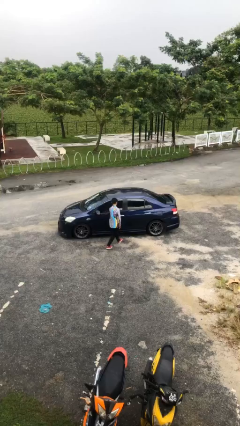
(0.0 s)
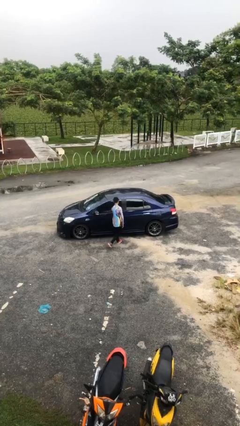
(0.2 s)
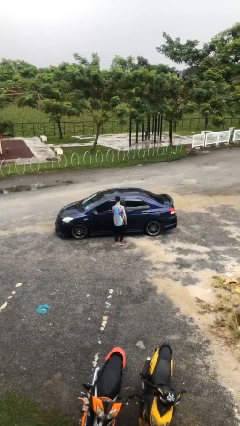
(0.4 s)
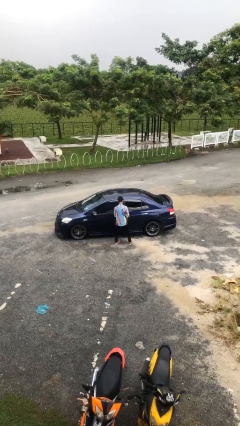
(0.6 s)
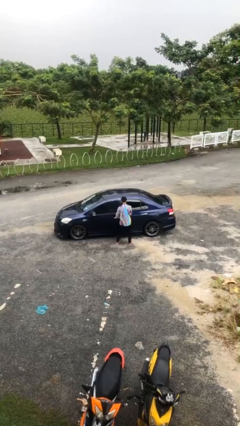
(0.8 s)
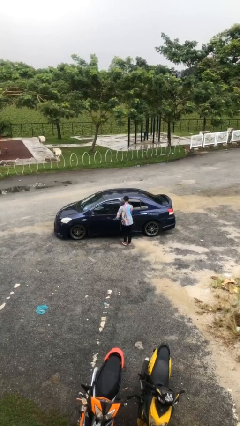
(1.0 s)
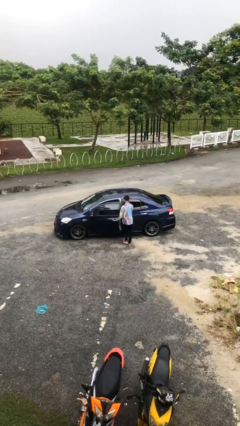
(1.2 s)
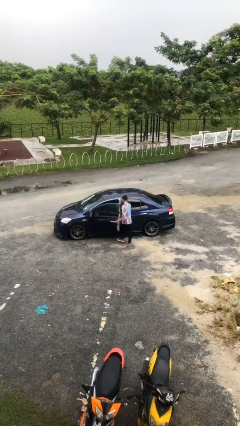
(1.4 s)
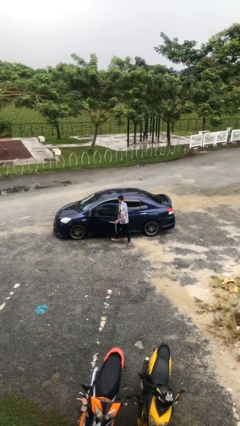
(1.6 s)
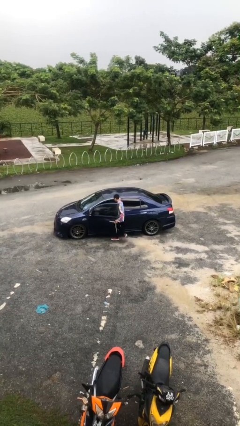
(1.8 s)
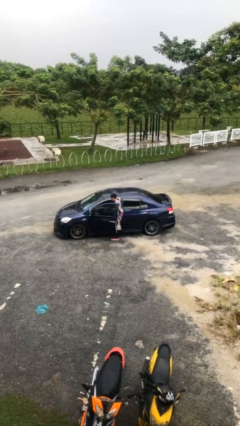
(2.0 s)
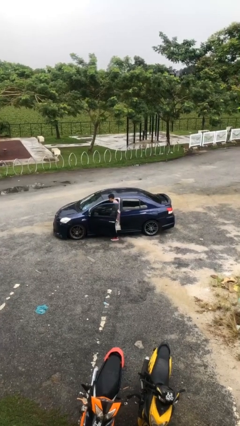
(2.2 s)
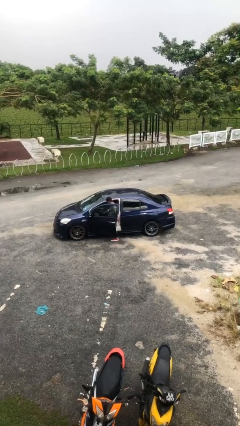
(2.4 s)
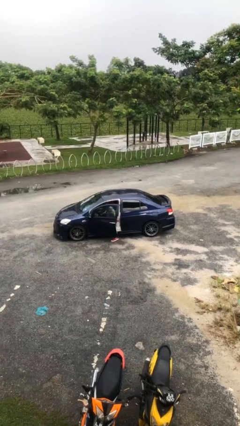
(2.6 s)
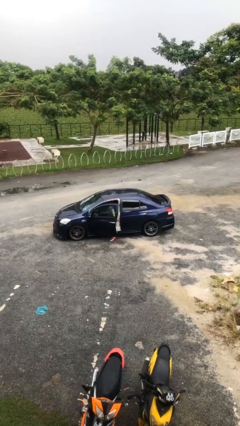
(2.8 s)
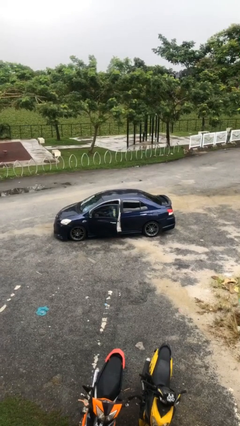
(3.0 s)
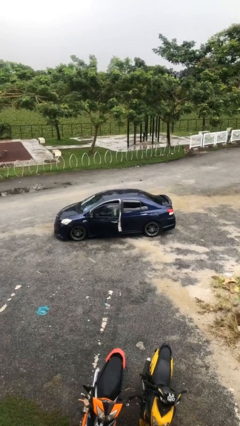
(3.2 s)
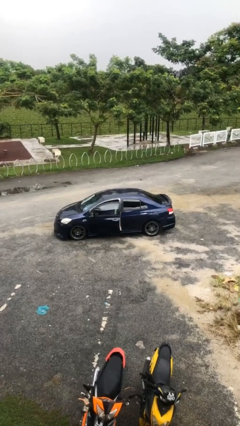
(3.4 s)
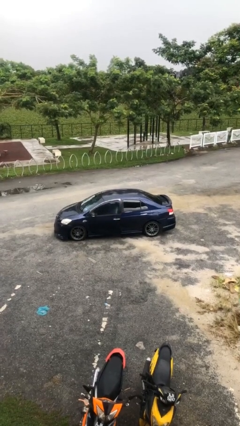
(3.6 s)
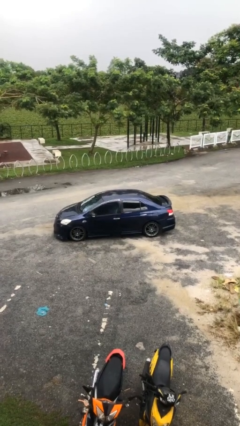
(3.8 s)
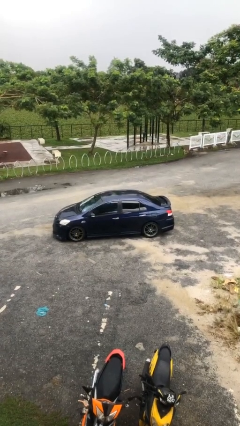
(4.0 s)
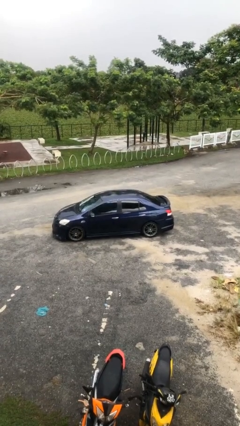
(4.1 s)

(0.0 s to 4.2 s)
car picks up person

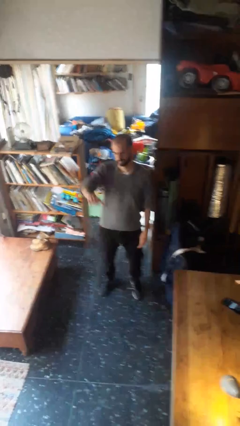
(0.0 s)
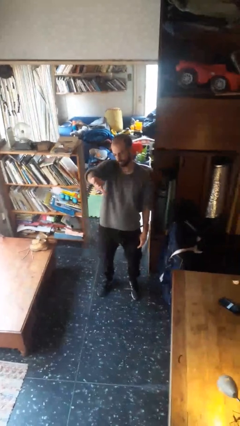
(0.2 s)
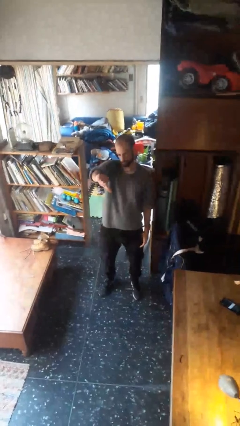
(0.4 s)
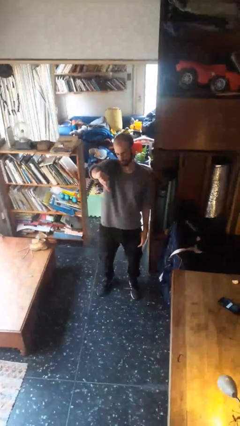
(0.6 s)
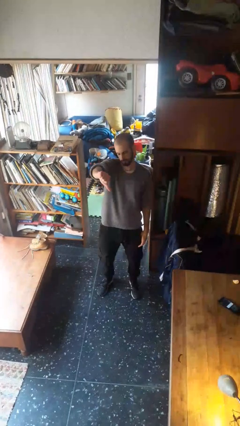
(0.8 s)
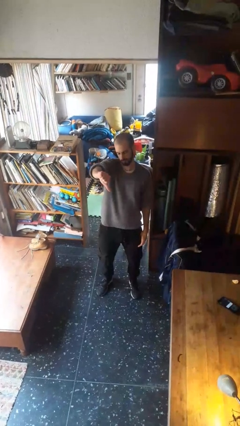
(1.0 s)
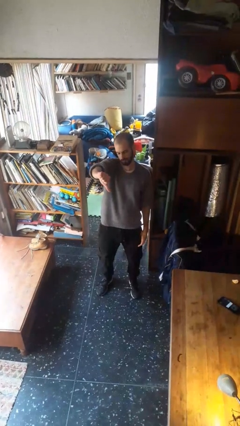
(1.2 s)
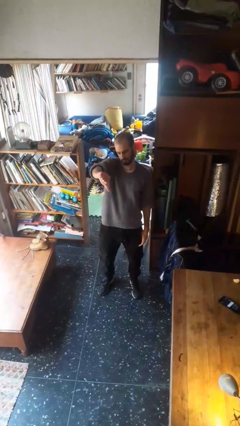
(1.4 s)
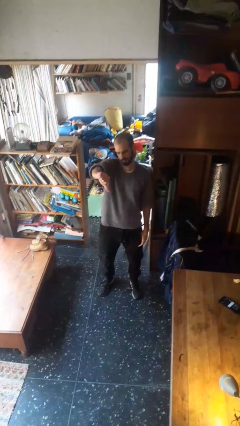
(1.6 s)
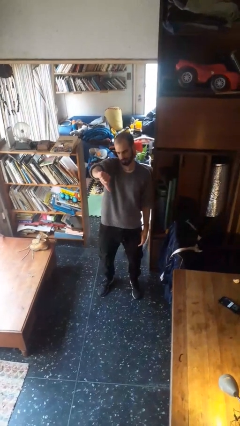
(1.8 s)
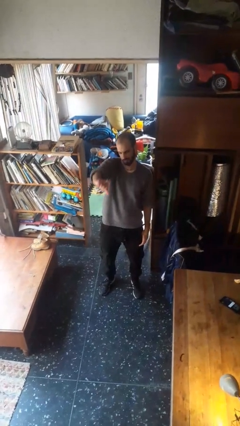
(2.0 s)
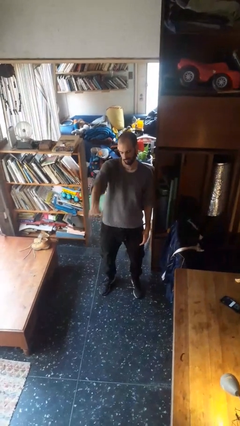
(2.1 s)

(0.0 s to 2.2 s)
person gestures thumbs down

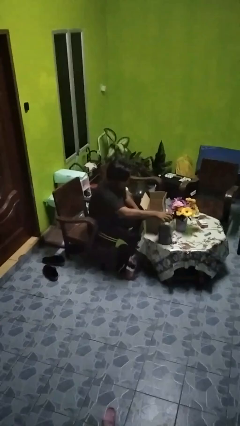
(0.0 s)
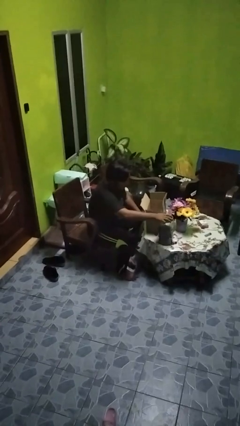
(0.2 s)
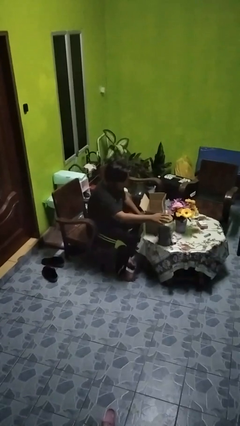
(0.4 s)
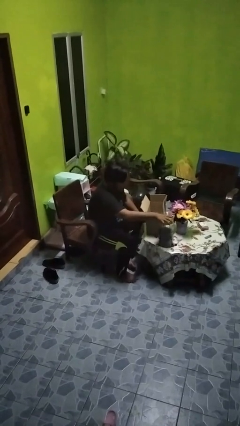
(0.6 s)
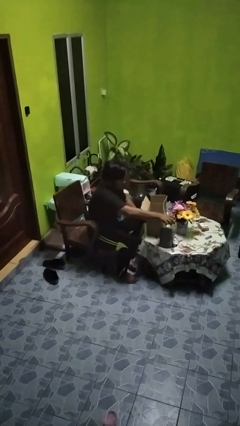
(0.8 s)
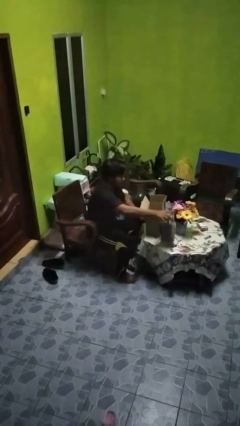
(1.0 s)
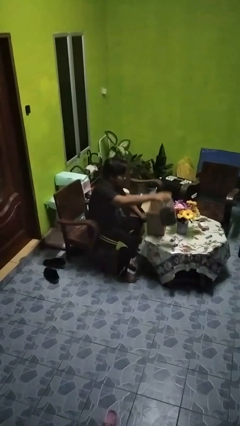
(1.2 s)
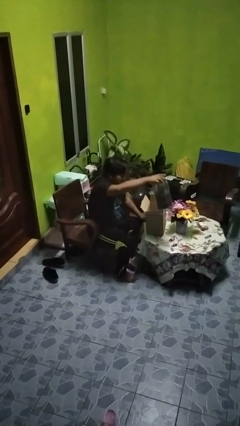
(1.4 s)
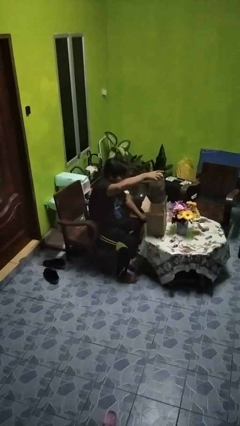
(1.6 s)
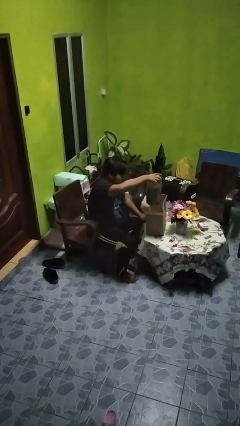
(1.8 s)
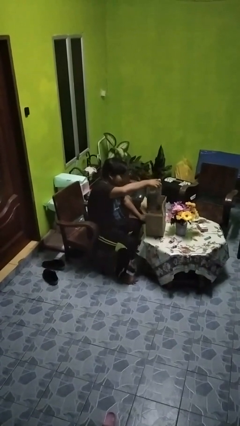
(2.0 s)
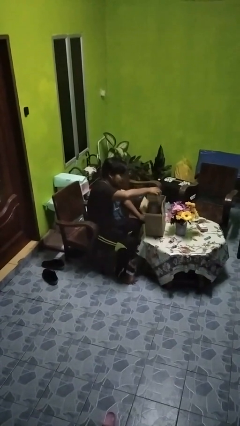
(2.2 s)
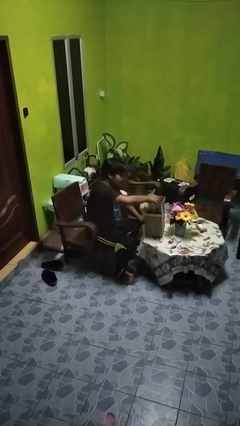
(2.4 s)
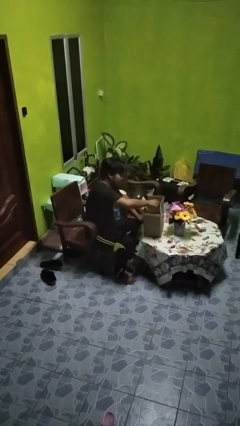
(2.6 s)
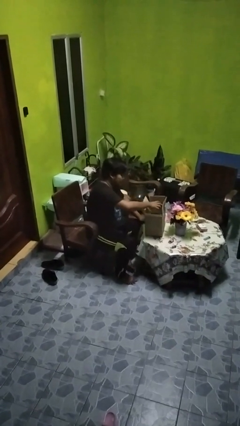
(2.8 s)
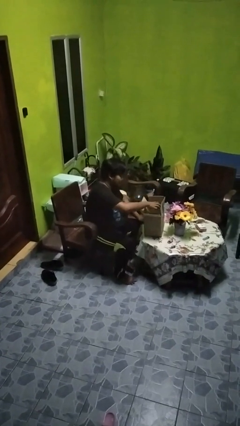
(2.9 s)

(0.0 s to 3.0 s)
person puts object into box

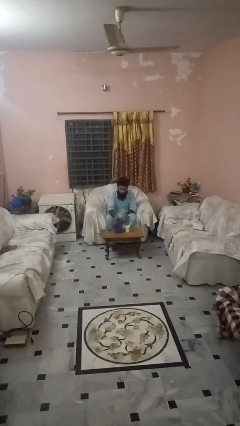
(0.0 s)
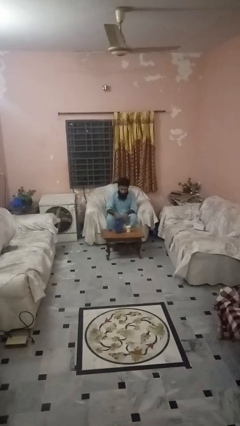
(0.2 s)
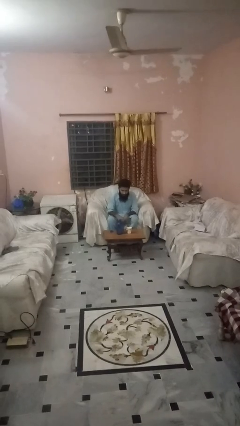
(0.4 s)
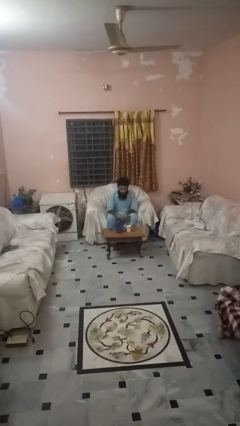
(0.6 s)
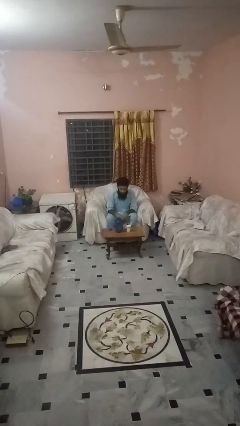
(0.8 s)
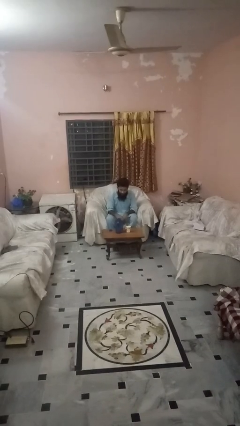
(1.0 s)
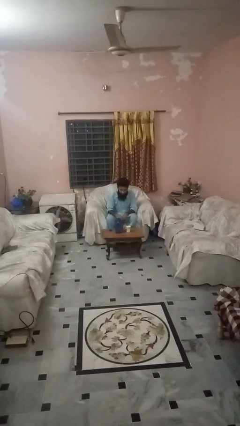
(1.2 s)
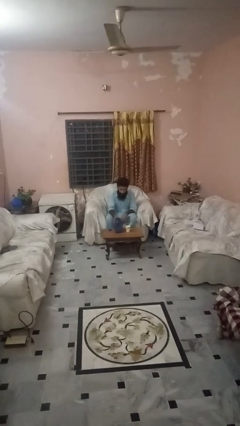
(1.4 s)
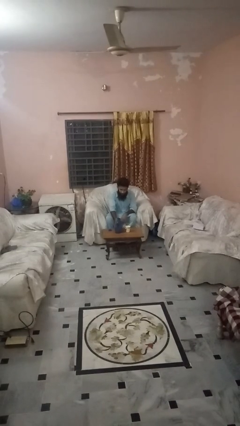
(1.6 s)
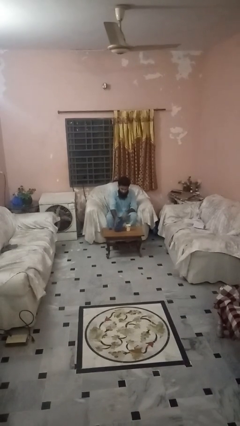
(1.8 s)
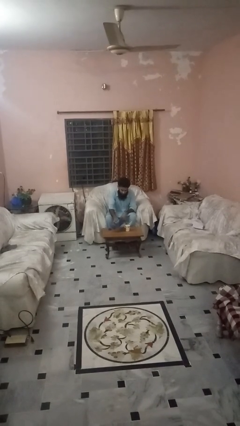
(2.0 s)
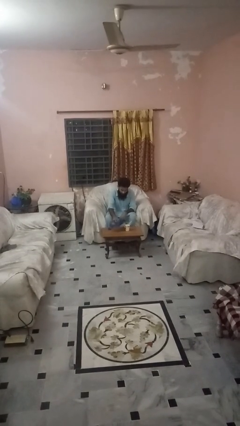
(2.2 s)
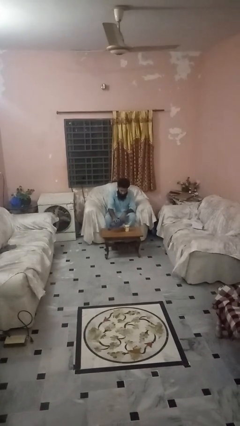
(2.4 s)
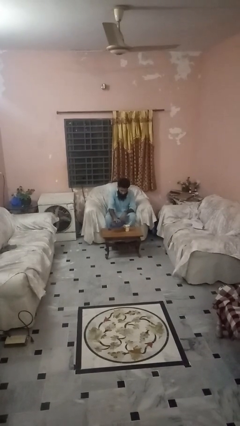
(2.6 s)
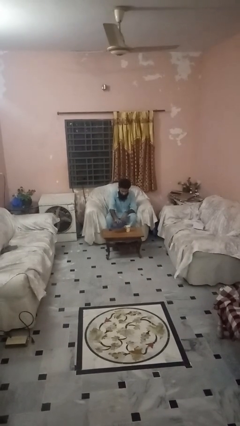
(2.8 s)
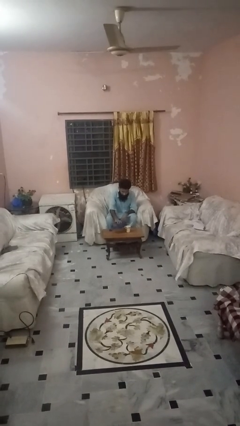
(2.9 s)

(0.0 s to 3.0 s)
person pours liquid into cup

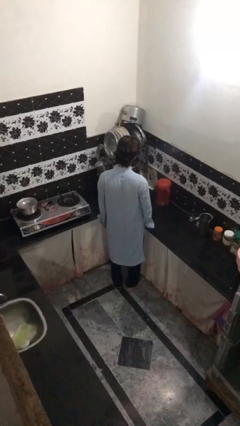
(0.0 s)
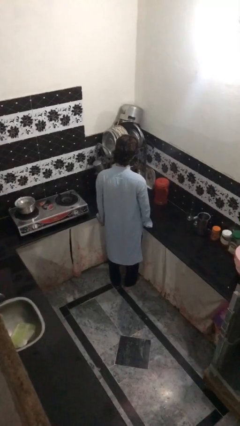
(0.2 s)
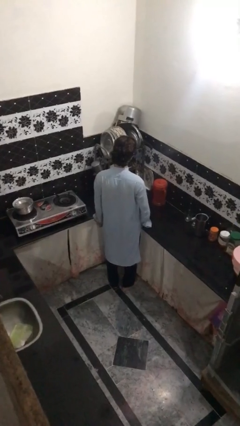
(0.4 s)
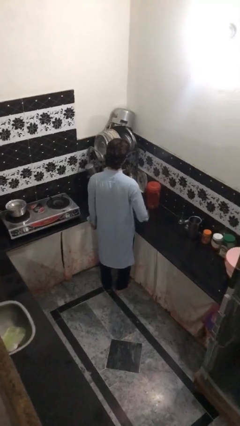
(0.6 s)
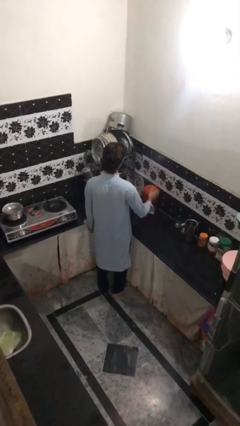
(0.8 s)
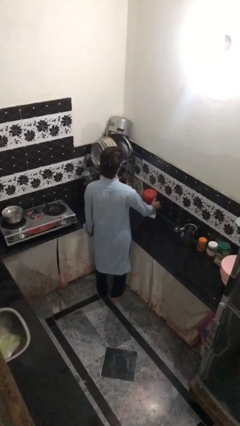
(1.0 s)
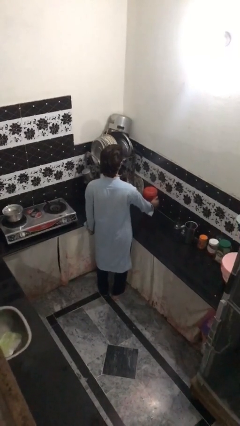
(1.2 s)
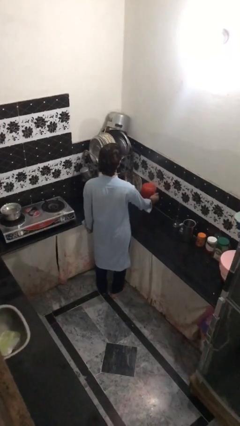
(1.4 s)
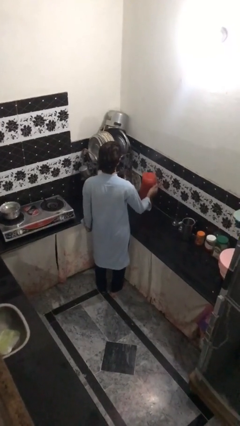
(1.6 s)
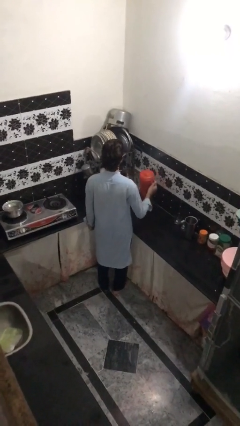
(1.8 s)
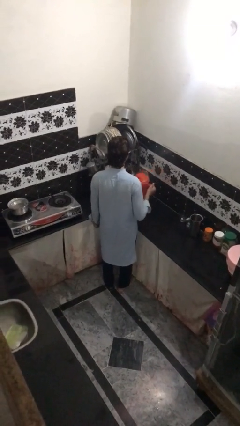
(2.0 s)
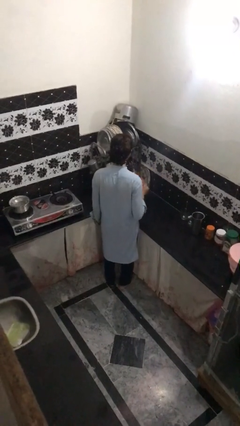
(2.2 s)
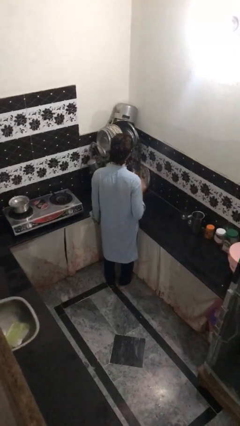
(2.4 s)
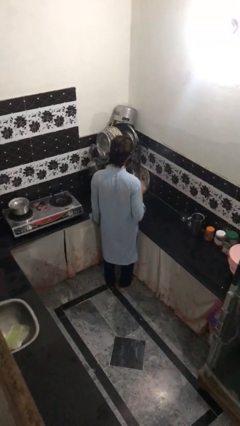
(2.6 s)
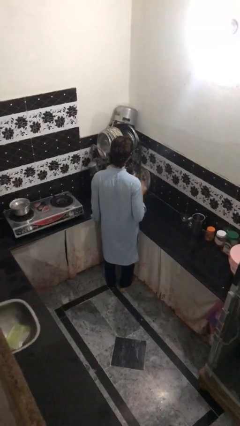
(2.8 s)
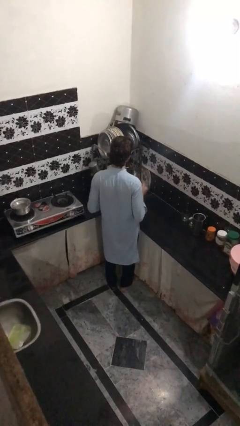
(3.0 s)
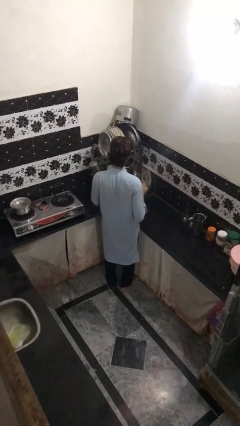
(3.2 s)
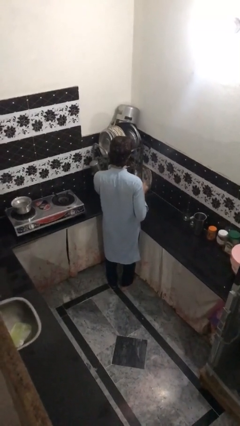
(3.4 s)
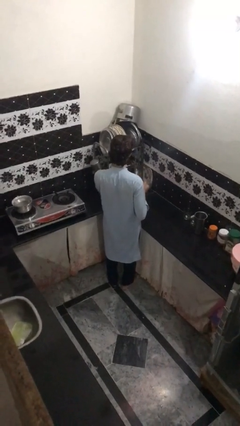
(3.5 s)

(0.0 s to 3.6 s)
person picks up object from countertop

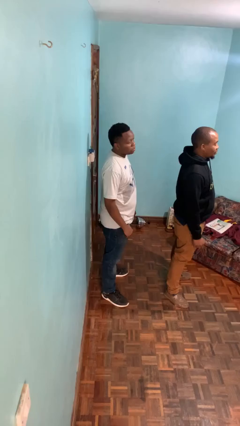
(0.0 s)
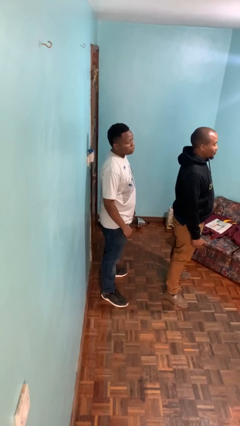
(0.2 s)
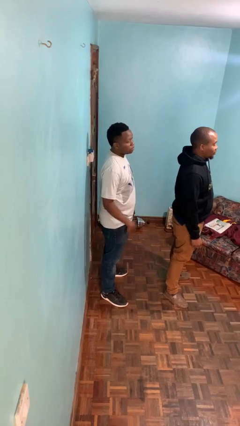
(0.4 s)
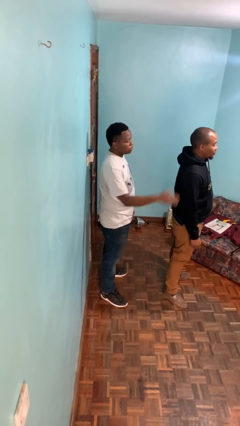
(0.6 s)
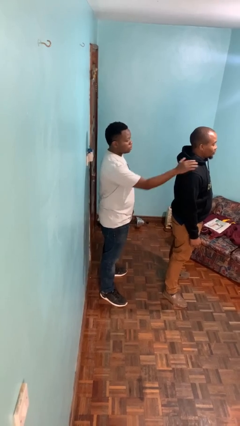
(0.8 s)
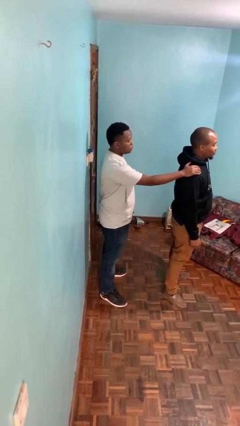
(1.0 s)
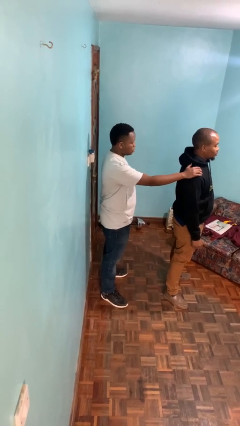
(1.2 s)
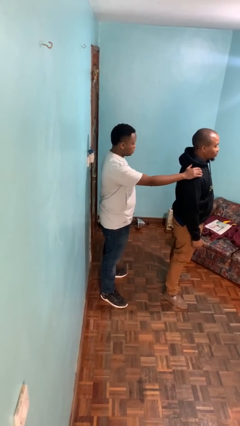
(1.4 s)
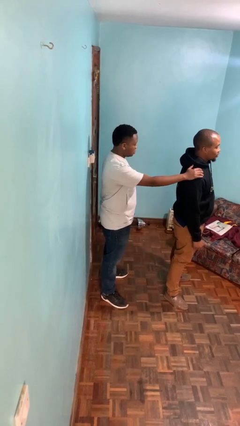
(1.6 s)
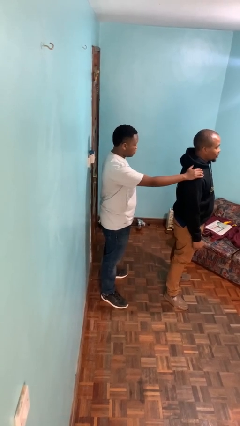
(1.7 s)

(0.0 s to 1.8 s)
person grabs person by shoulder
